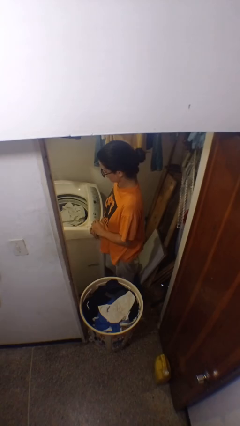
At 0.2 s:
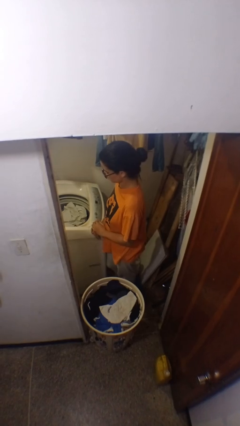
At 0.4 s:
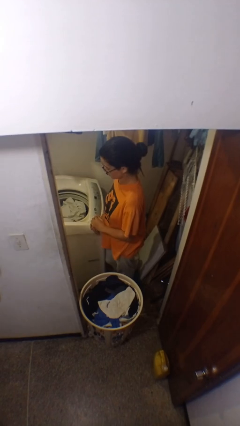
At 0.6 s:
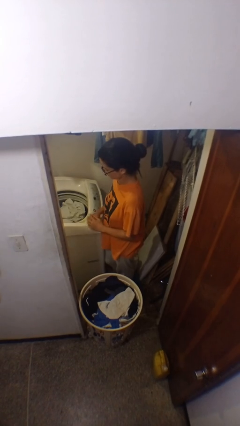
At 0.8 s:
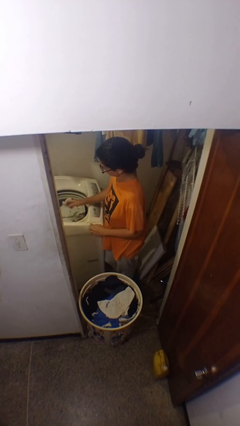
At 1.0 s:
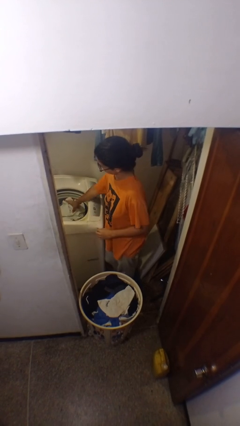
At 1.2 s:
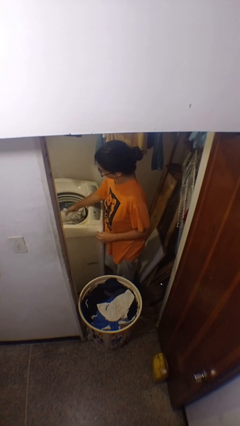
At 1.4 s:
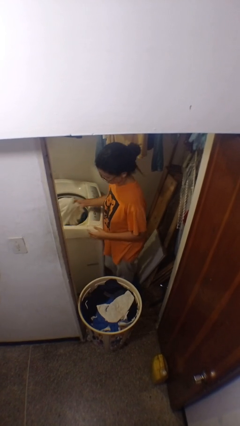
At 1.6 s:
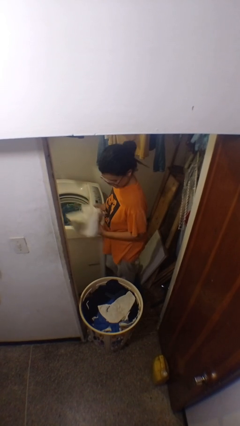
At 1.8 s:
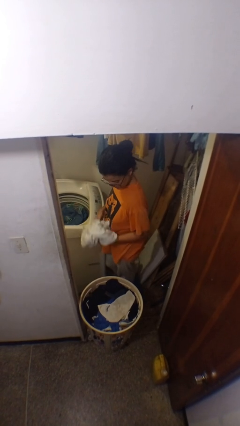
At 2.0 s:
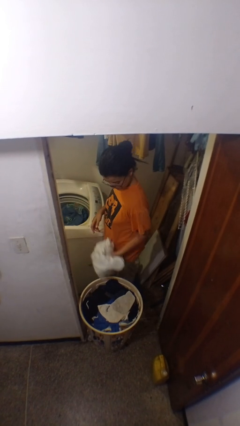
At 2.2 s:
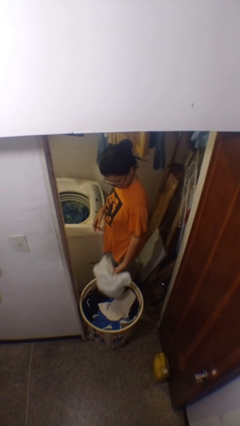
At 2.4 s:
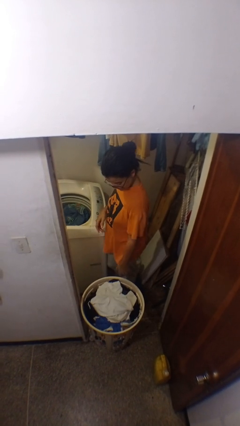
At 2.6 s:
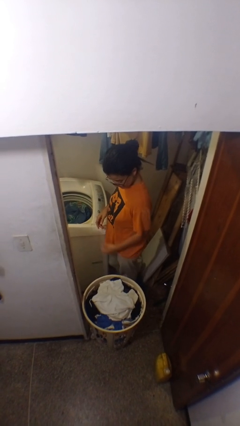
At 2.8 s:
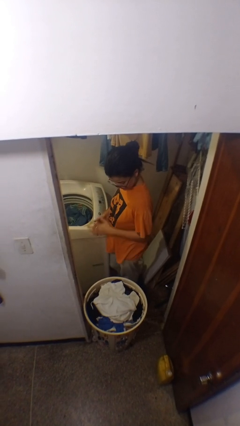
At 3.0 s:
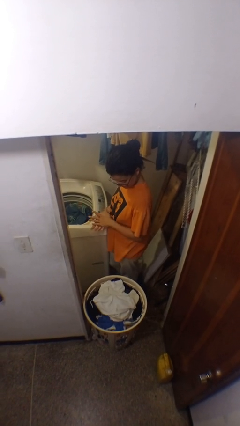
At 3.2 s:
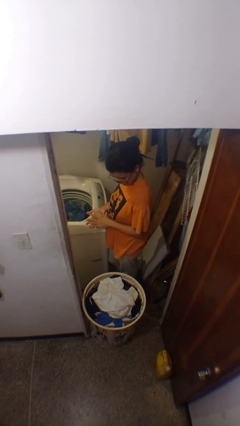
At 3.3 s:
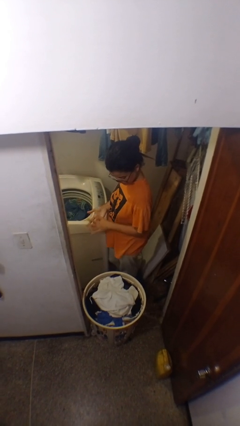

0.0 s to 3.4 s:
person unloads clotheswasher

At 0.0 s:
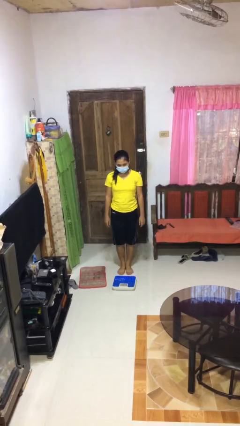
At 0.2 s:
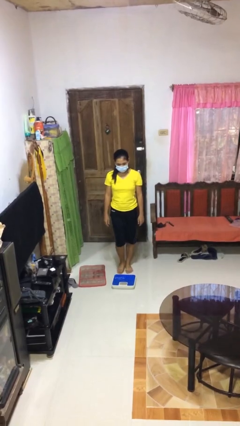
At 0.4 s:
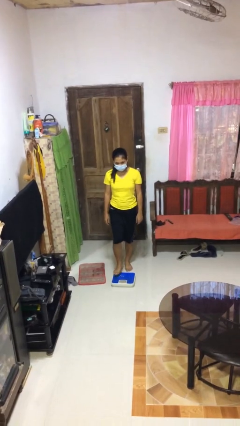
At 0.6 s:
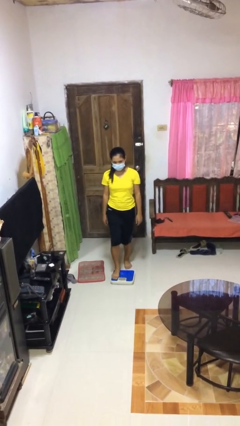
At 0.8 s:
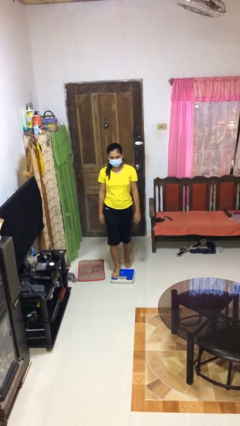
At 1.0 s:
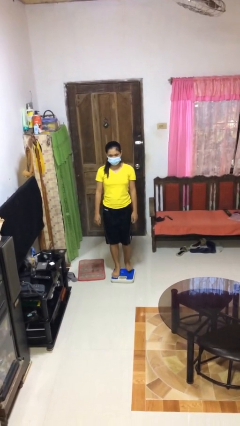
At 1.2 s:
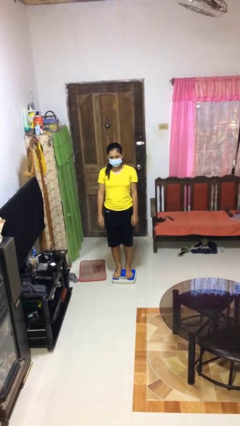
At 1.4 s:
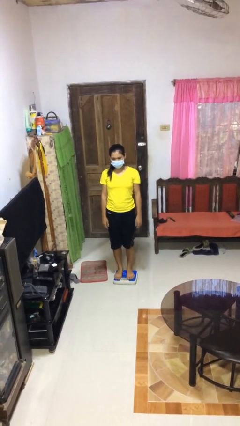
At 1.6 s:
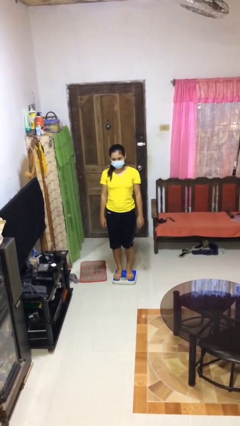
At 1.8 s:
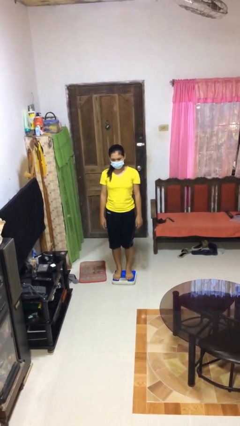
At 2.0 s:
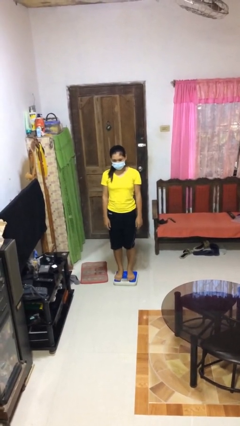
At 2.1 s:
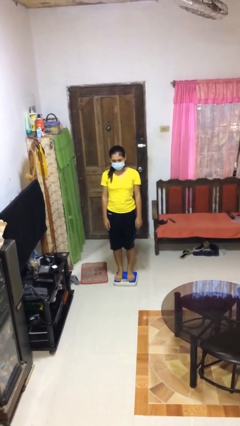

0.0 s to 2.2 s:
person uses bodyweight scale

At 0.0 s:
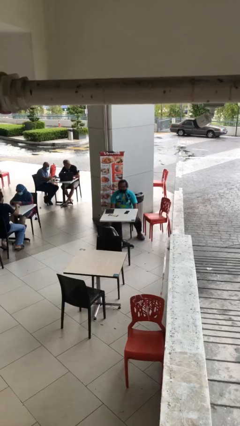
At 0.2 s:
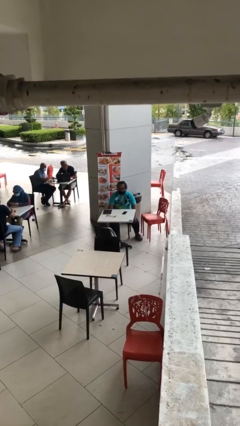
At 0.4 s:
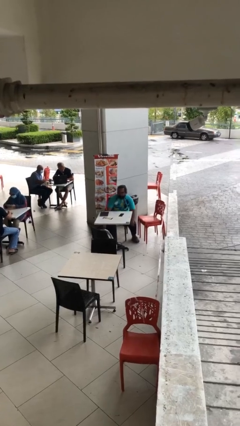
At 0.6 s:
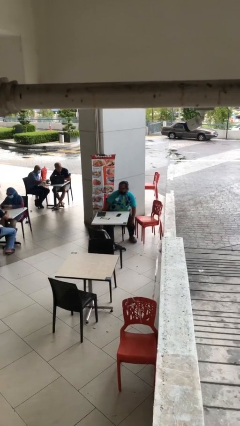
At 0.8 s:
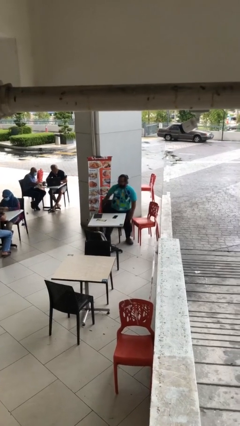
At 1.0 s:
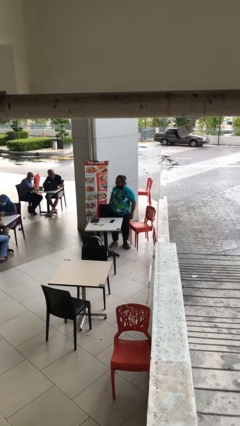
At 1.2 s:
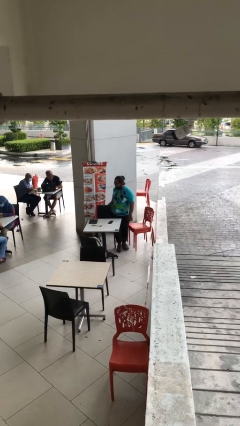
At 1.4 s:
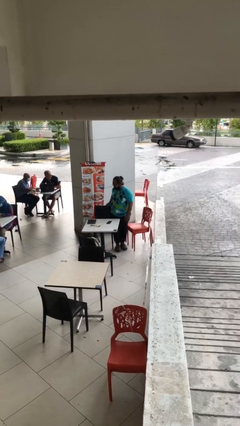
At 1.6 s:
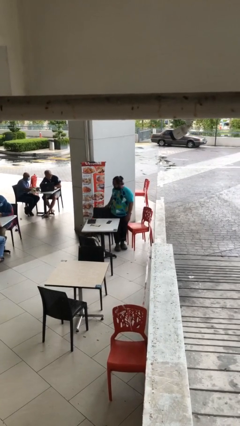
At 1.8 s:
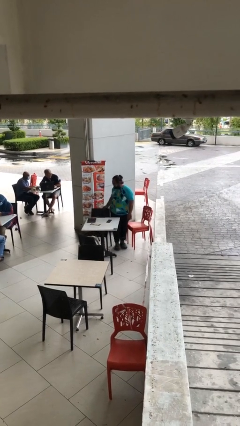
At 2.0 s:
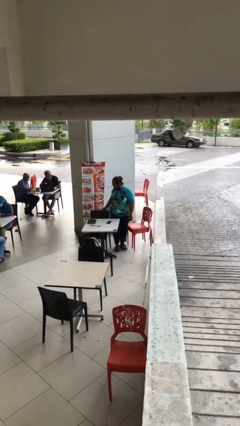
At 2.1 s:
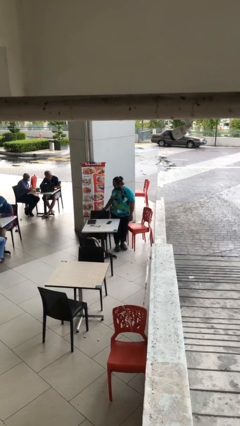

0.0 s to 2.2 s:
person stands up

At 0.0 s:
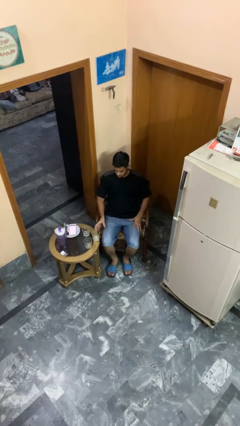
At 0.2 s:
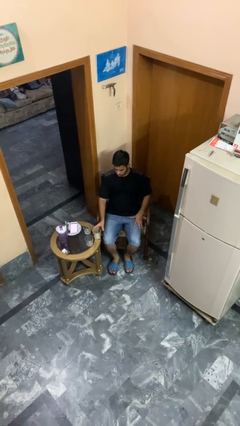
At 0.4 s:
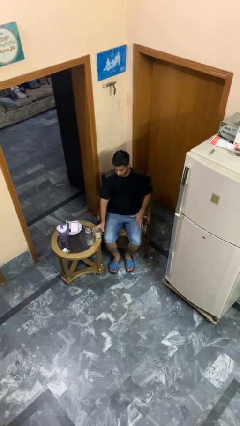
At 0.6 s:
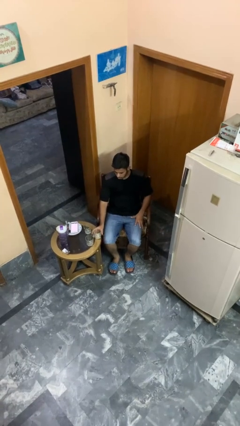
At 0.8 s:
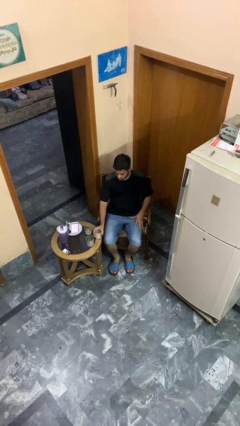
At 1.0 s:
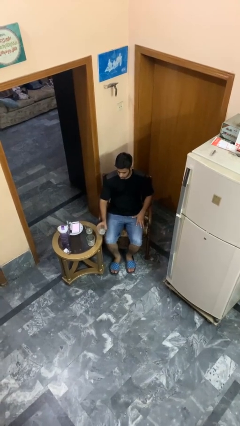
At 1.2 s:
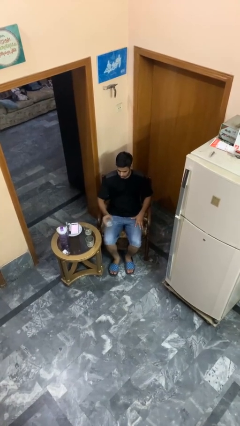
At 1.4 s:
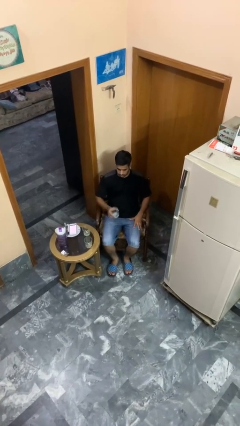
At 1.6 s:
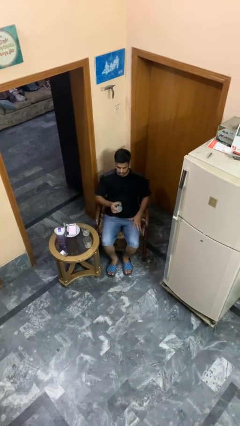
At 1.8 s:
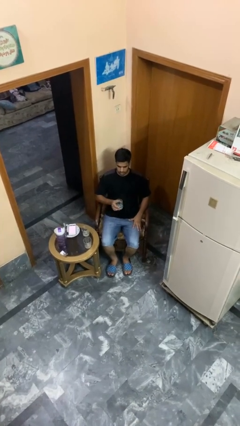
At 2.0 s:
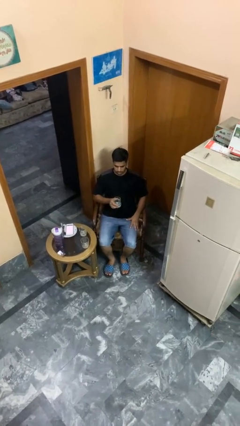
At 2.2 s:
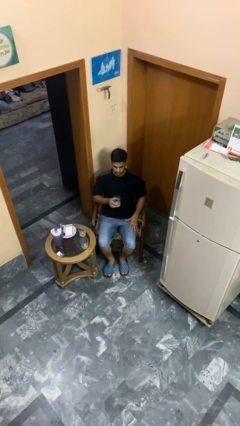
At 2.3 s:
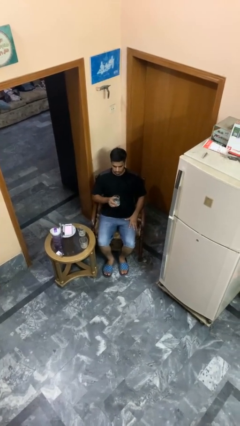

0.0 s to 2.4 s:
person picks up object from table

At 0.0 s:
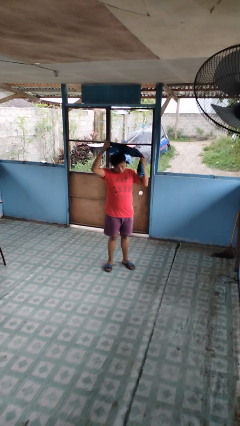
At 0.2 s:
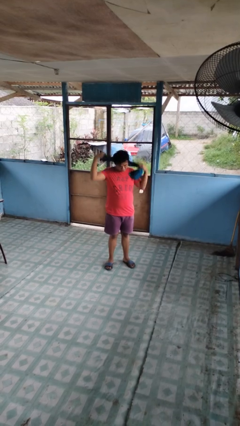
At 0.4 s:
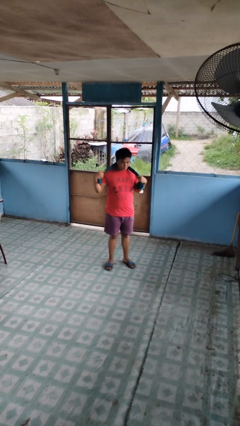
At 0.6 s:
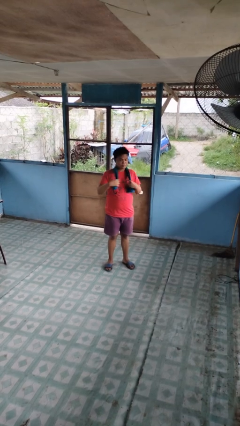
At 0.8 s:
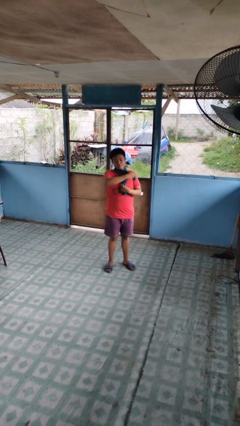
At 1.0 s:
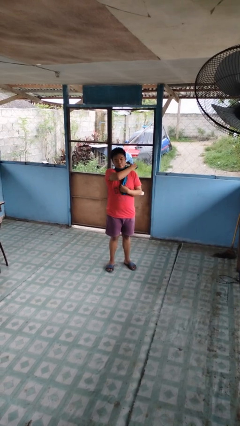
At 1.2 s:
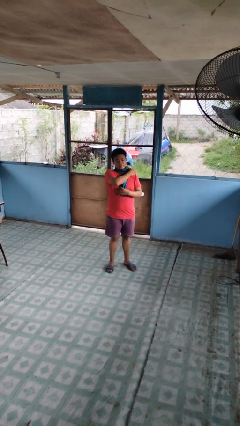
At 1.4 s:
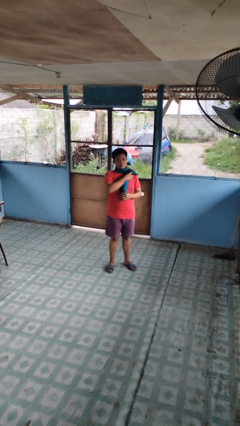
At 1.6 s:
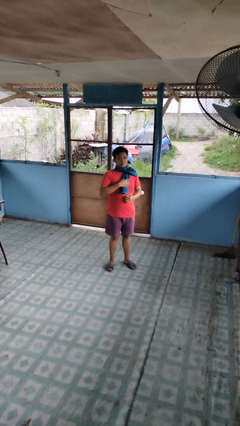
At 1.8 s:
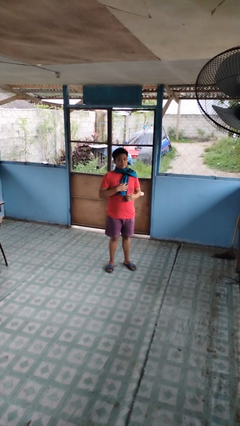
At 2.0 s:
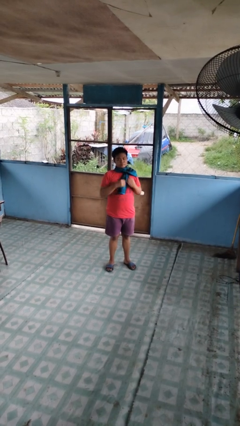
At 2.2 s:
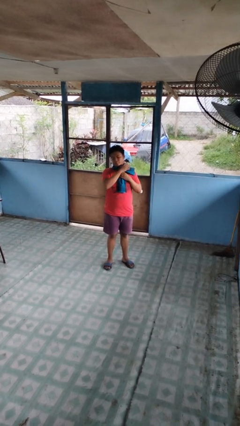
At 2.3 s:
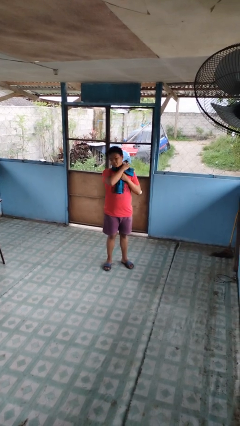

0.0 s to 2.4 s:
person puts on scarf

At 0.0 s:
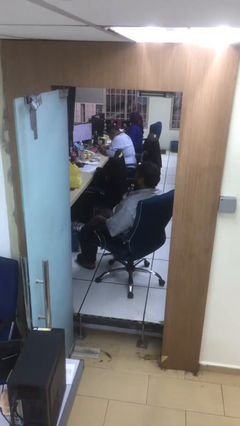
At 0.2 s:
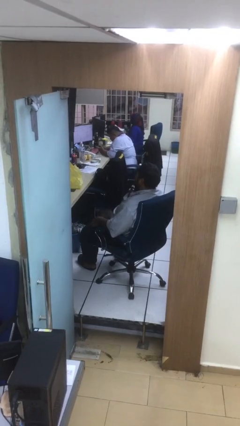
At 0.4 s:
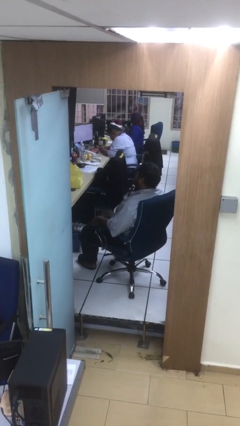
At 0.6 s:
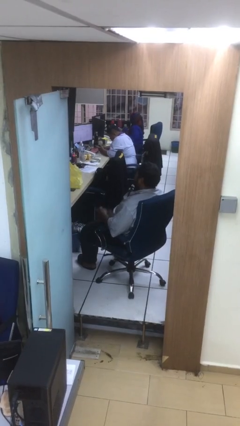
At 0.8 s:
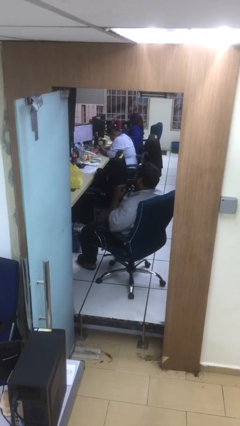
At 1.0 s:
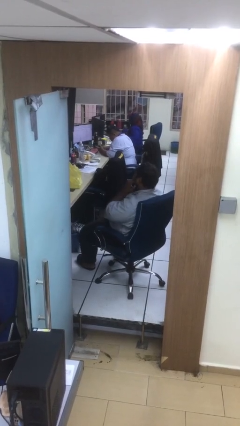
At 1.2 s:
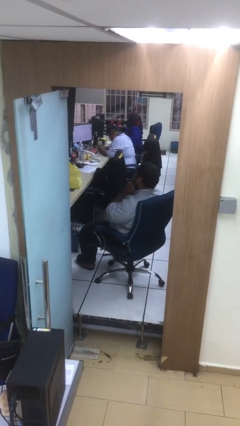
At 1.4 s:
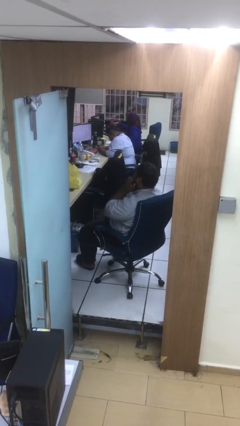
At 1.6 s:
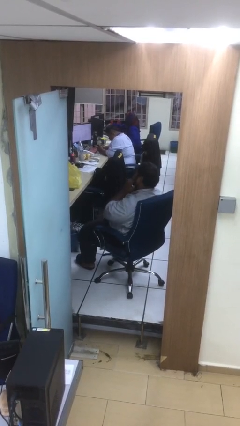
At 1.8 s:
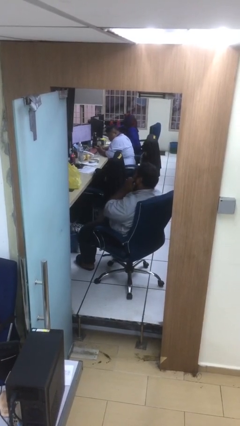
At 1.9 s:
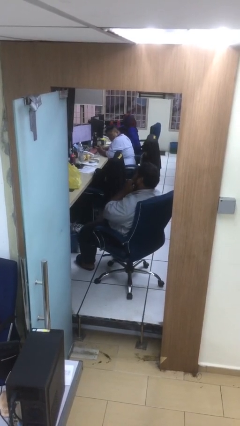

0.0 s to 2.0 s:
person scratches face

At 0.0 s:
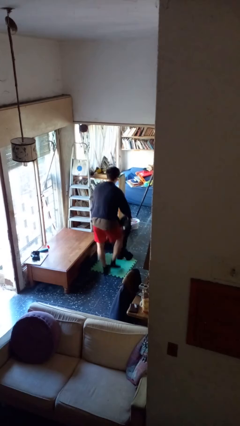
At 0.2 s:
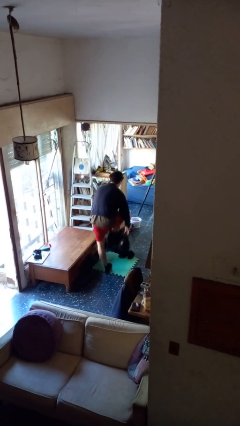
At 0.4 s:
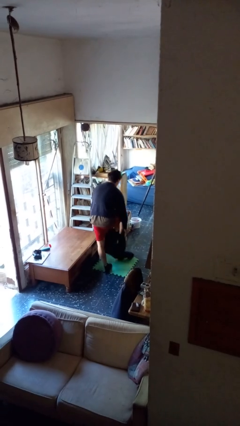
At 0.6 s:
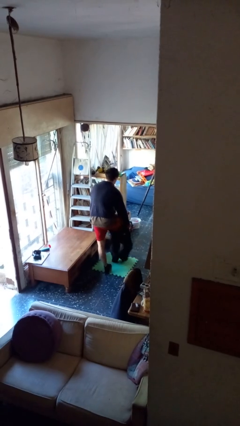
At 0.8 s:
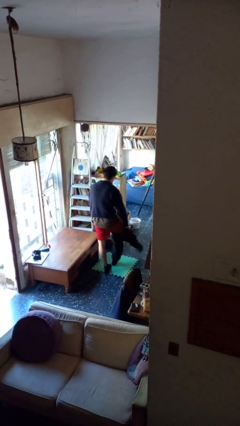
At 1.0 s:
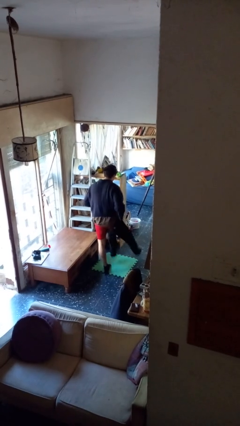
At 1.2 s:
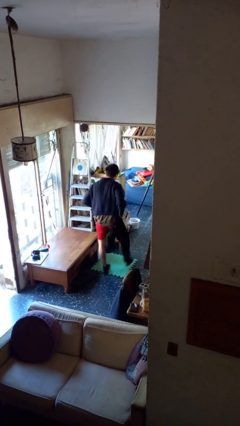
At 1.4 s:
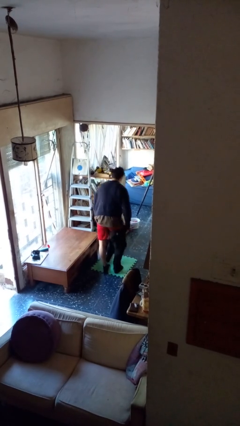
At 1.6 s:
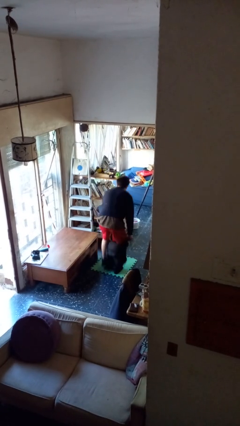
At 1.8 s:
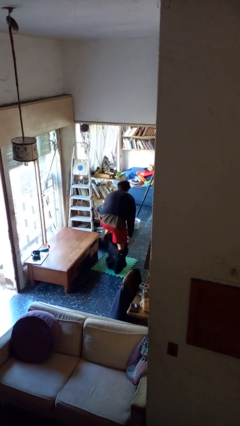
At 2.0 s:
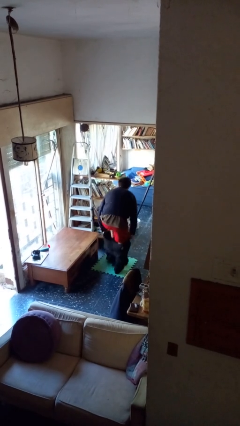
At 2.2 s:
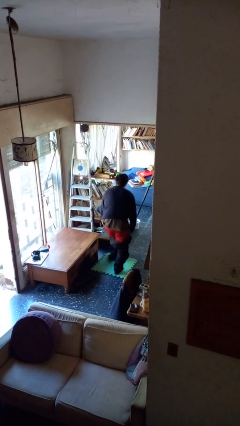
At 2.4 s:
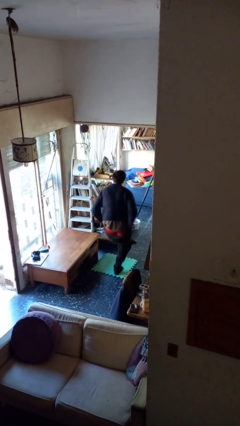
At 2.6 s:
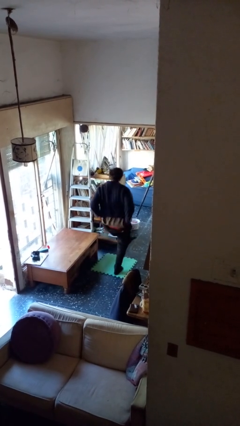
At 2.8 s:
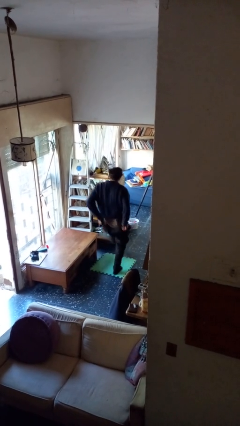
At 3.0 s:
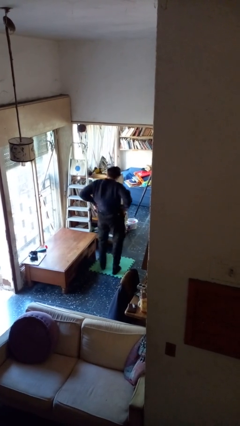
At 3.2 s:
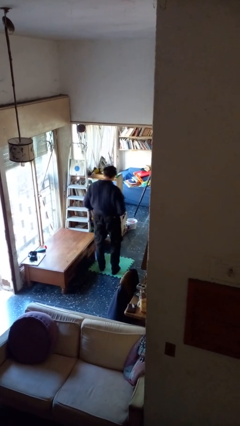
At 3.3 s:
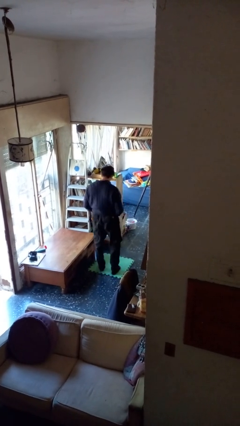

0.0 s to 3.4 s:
person puts on pants
